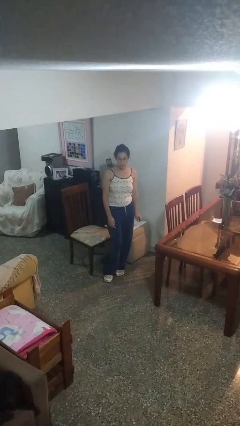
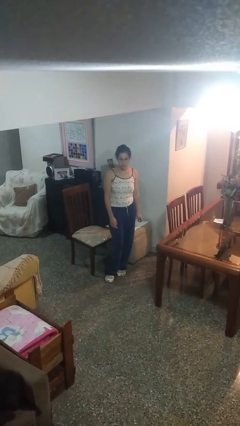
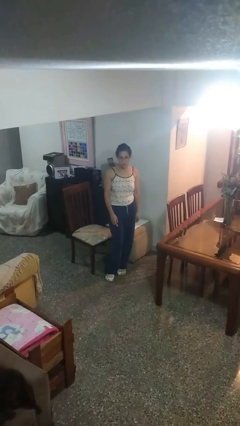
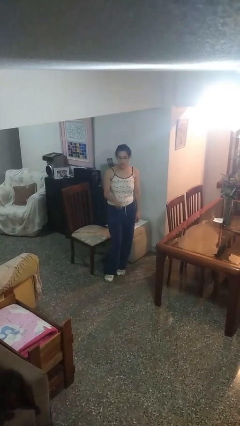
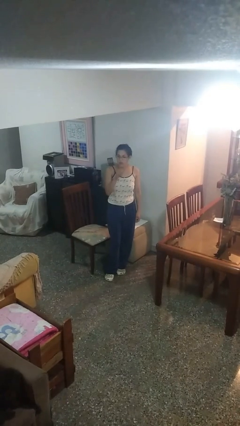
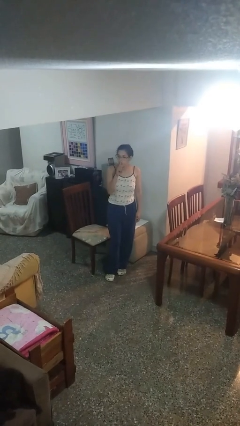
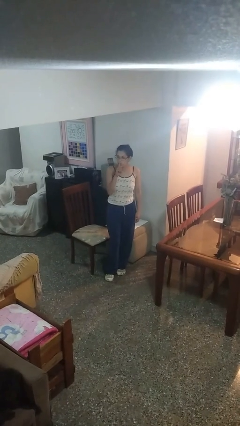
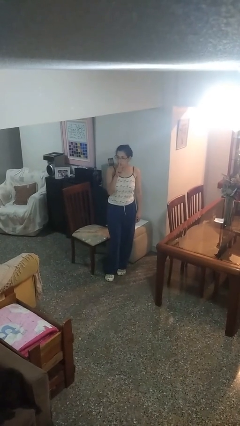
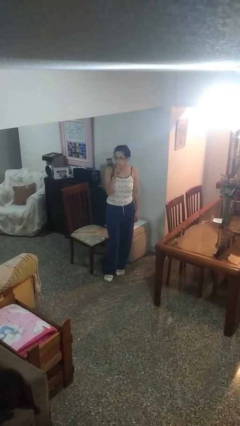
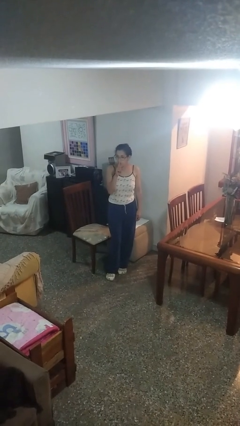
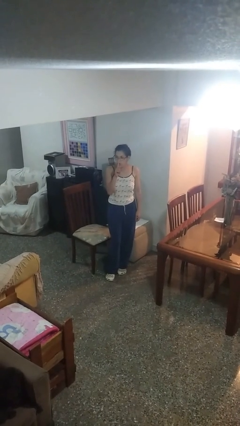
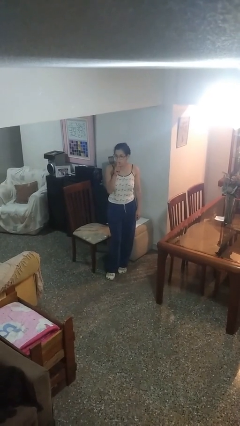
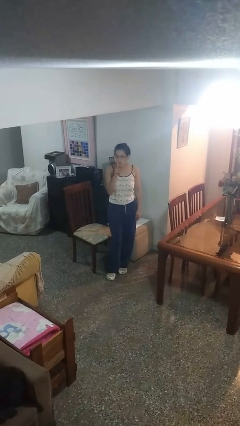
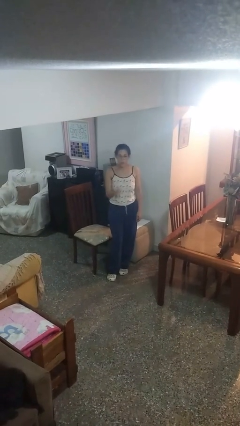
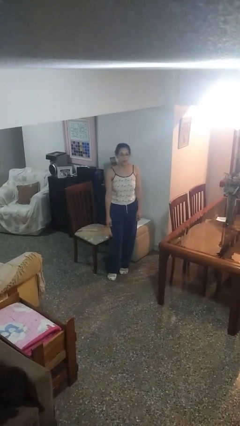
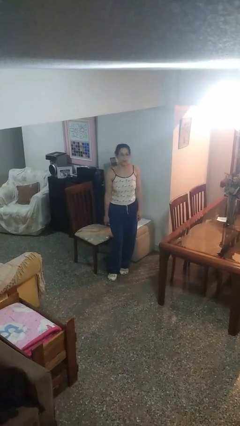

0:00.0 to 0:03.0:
person gestures be quiet

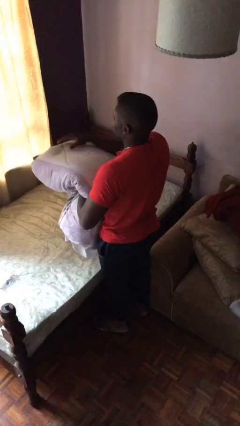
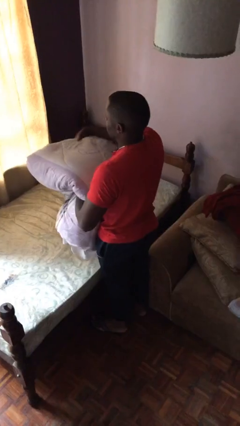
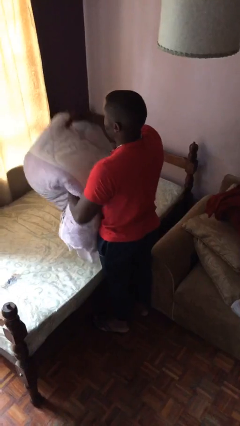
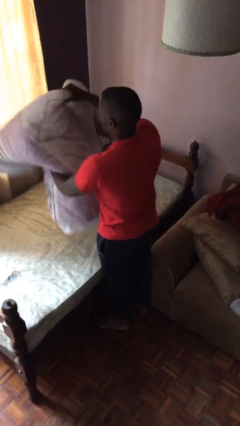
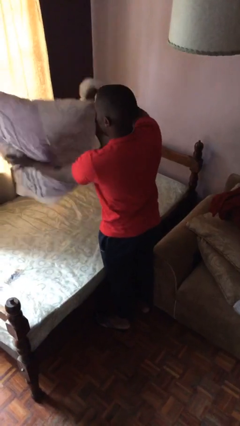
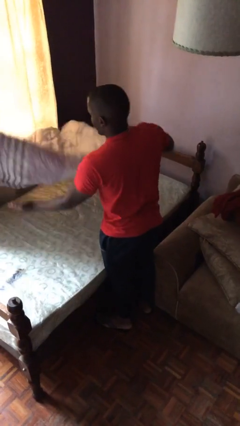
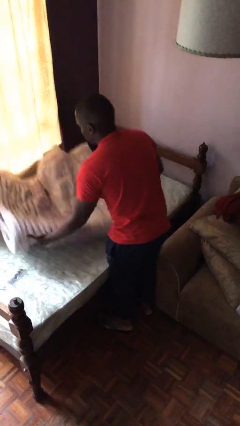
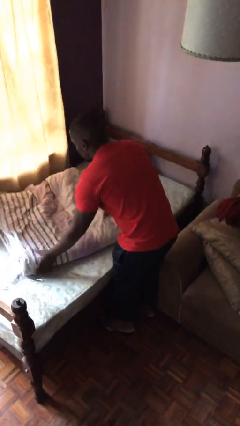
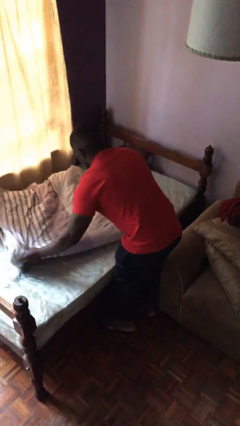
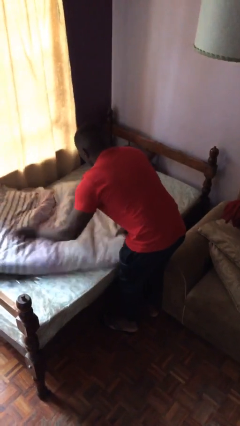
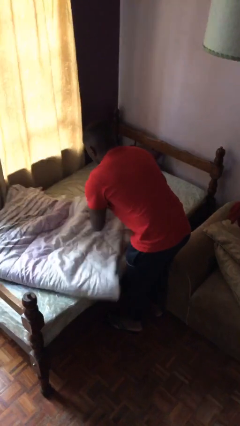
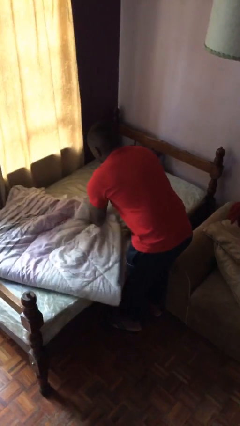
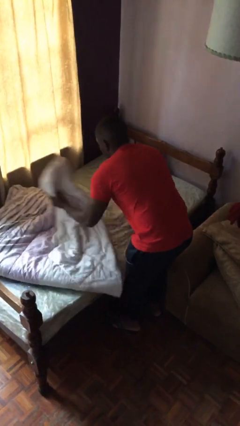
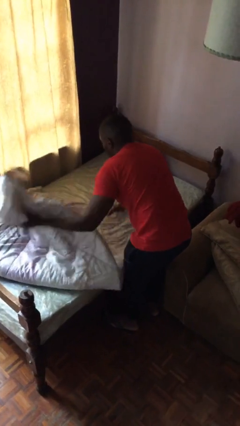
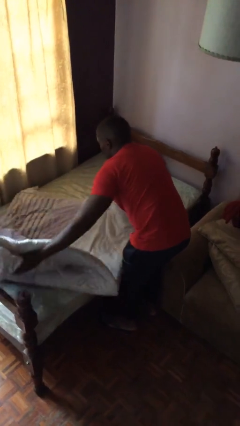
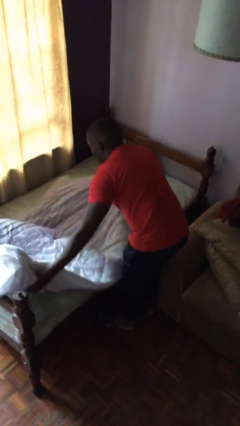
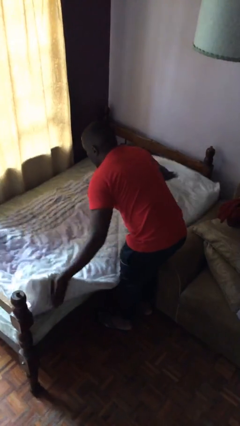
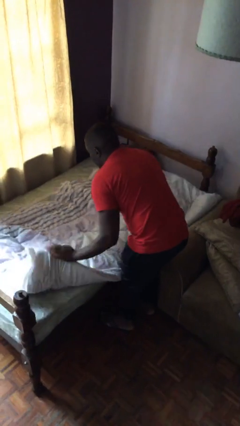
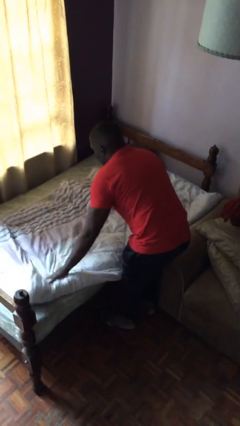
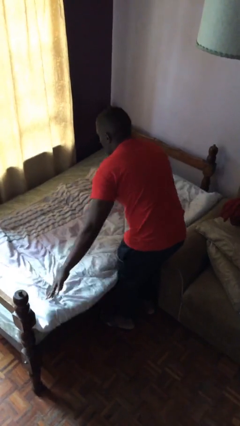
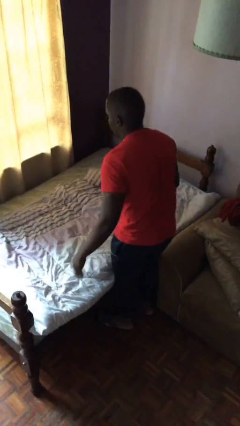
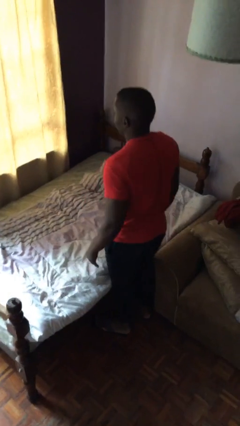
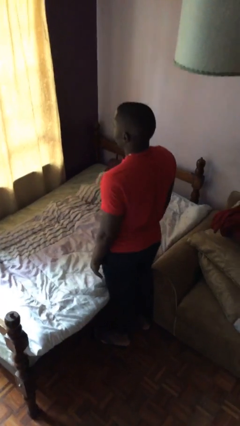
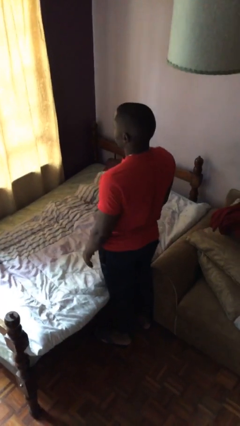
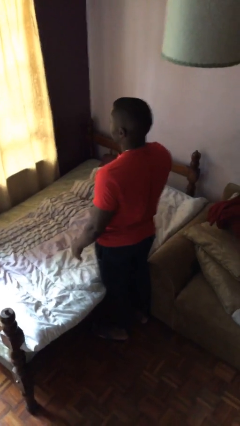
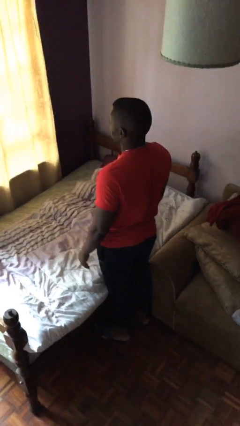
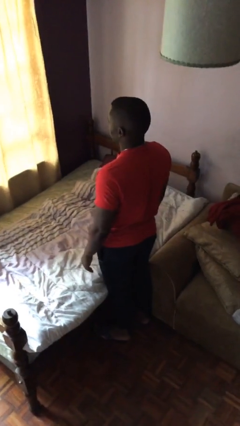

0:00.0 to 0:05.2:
person unfolds blanket

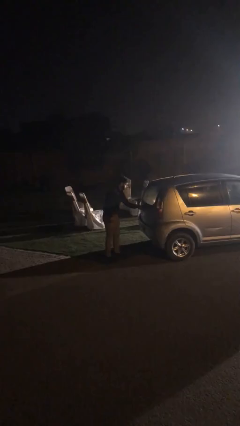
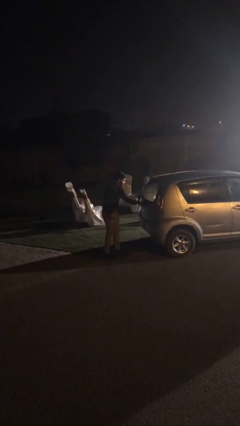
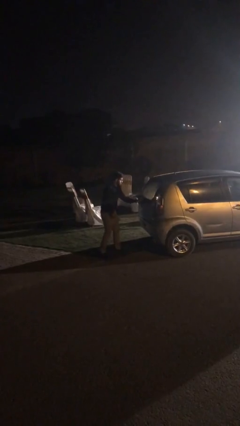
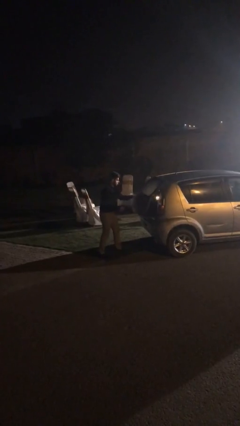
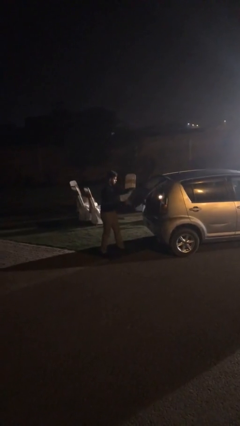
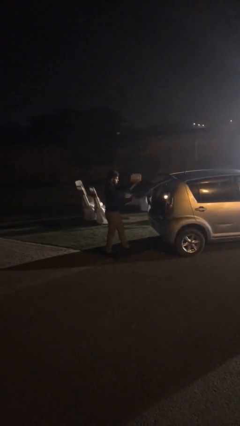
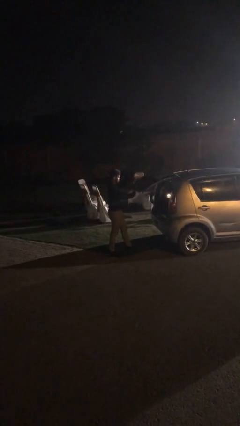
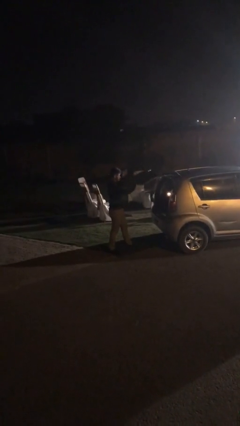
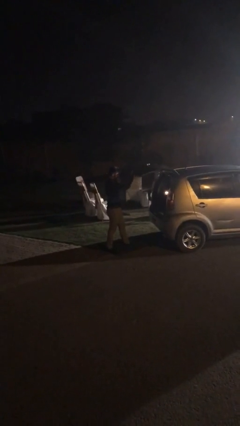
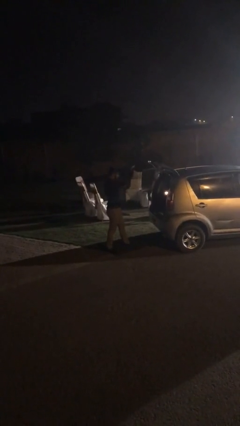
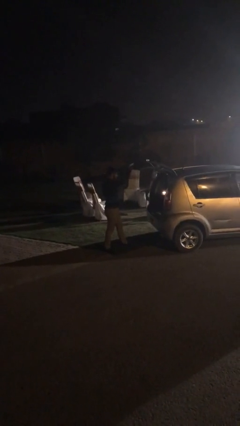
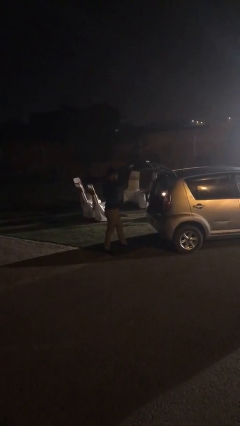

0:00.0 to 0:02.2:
person opens car trunk

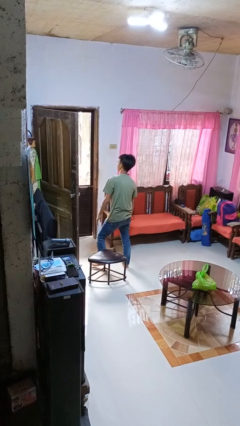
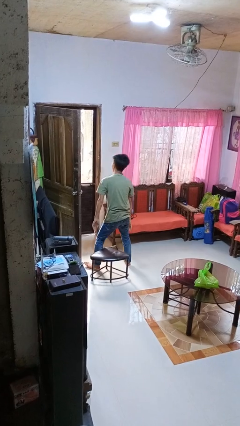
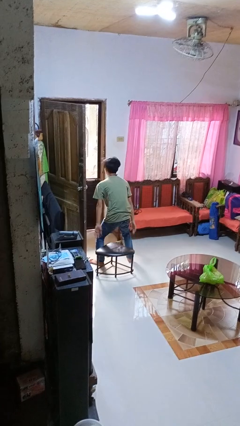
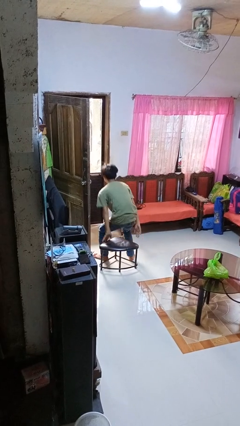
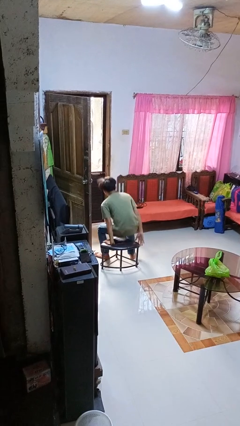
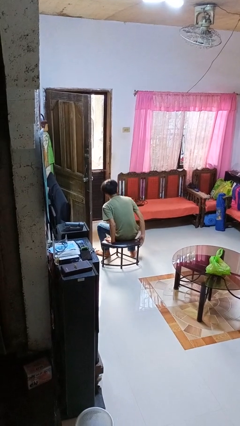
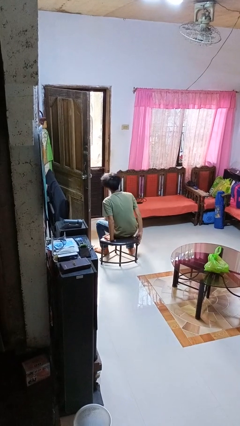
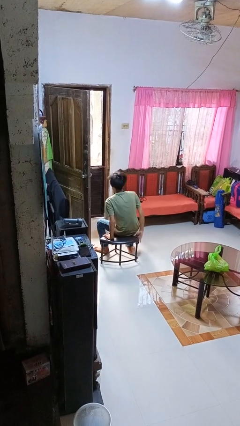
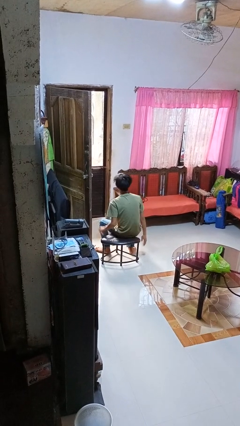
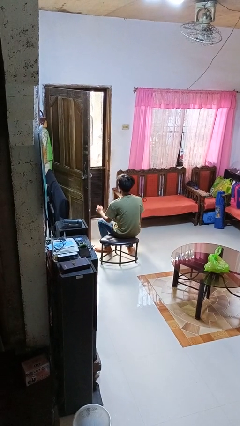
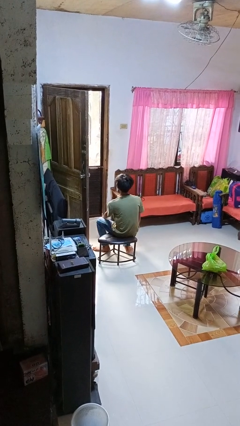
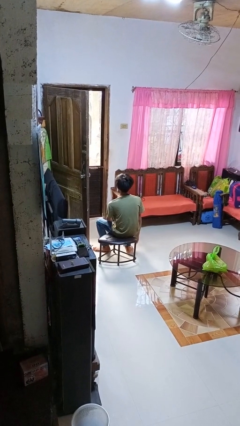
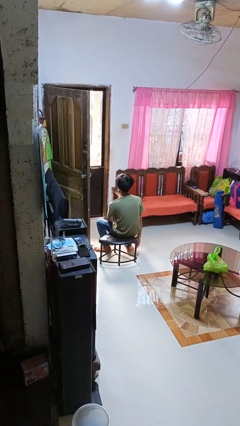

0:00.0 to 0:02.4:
person sits down

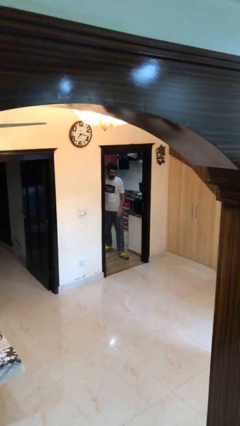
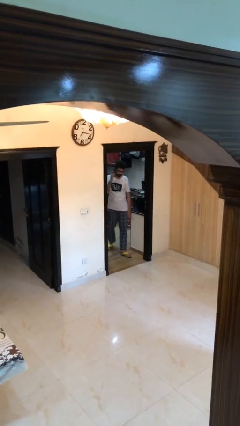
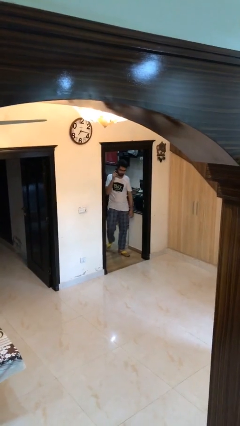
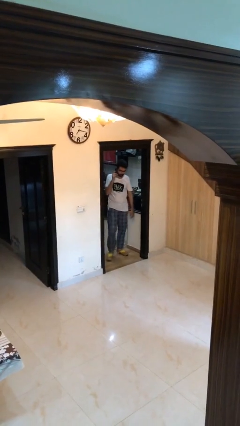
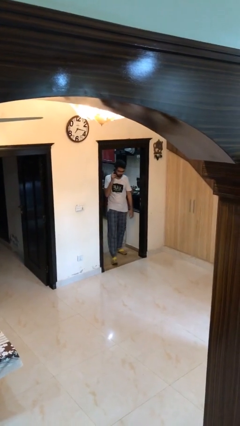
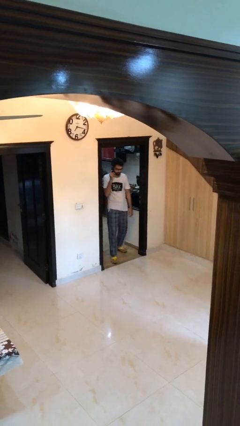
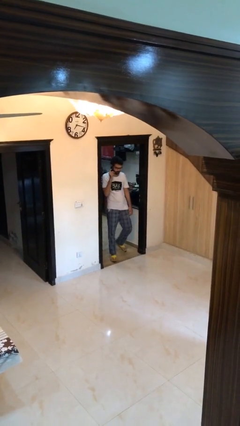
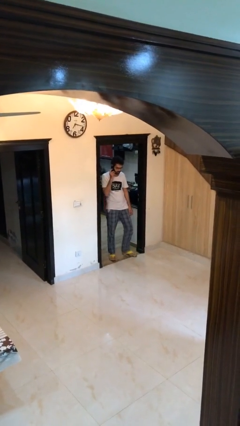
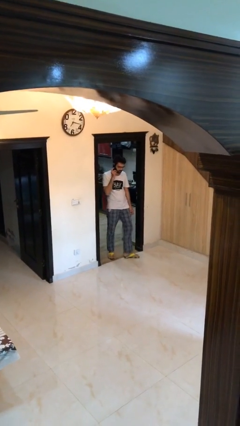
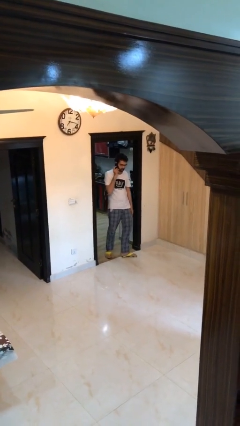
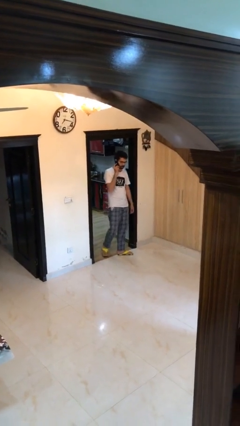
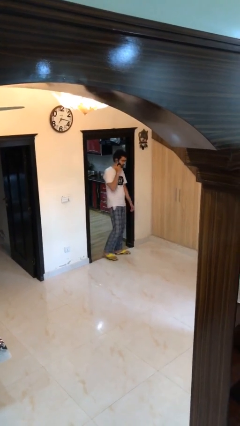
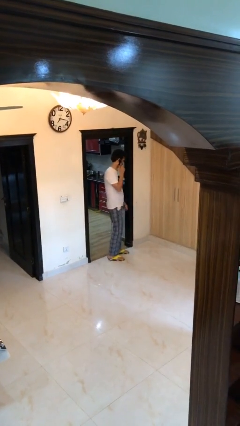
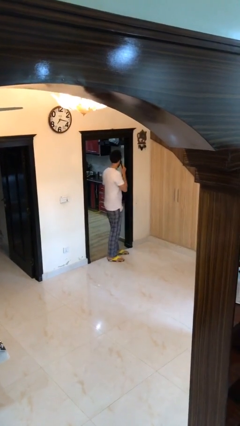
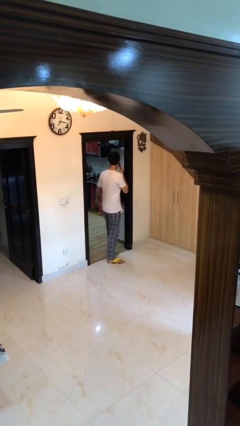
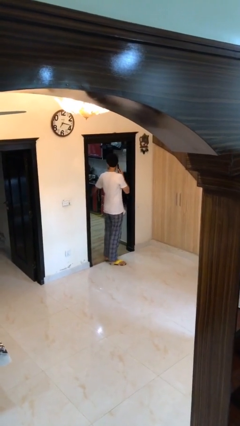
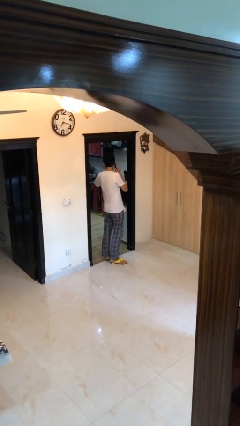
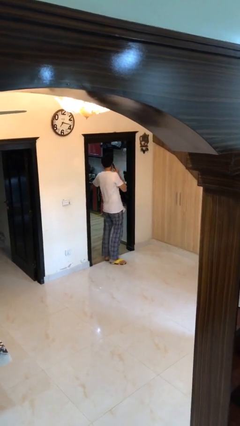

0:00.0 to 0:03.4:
person enters scene through structure

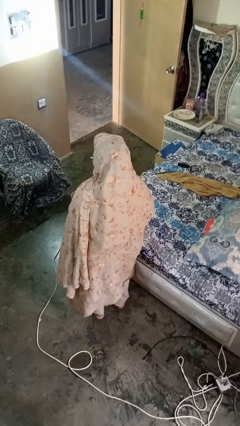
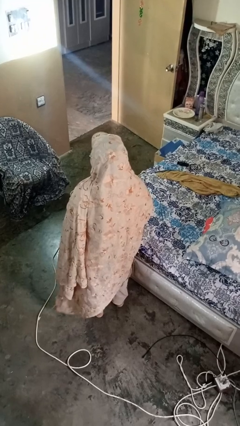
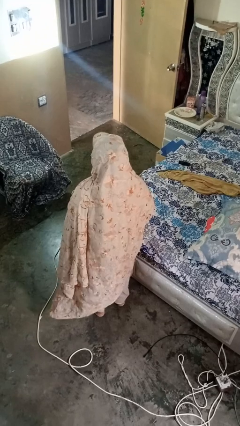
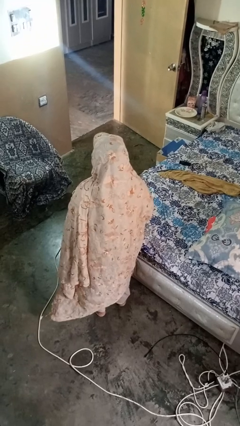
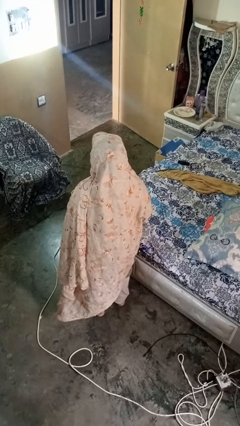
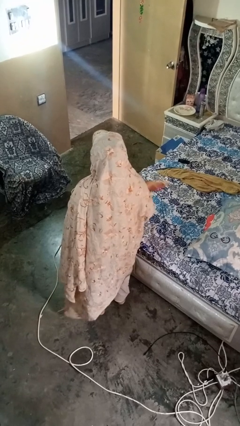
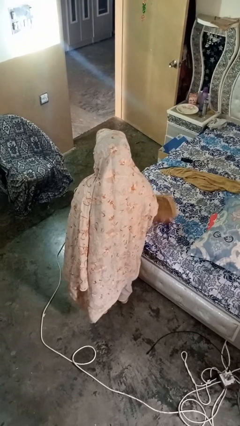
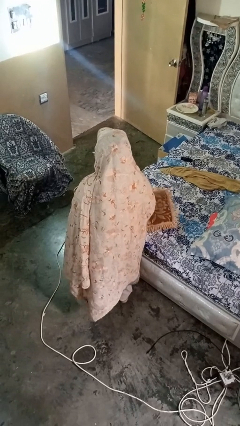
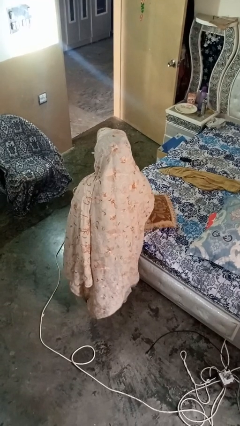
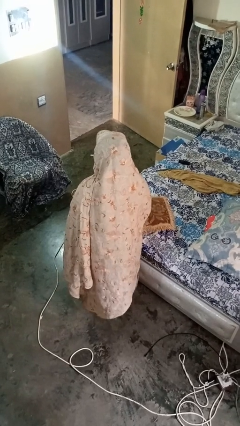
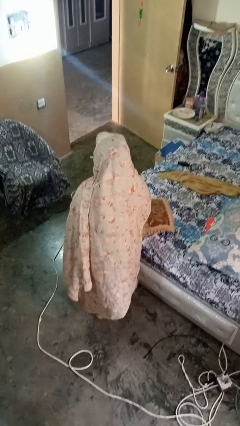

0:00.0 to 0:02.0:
person puts down object on bed
